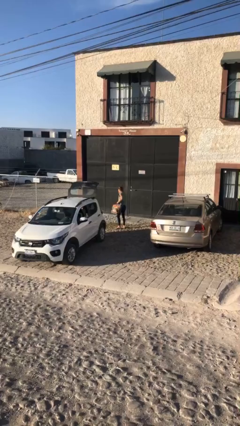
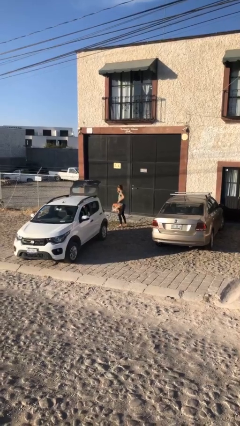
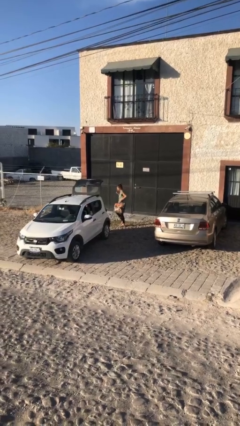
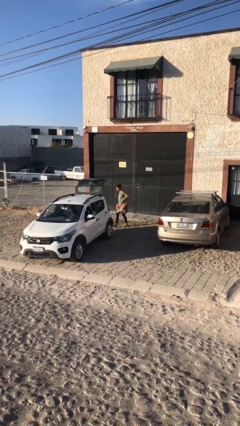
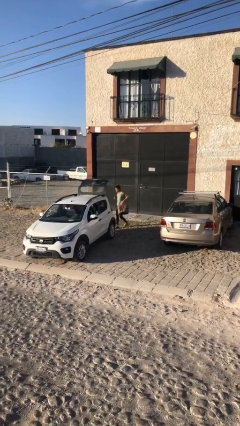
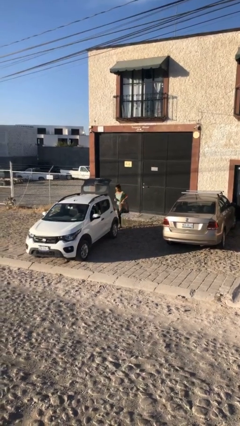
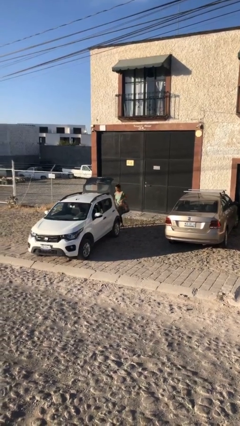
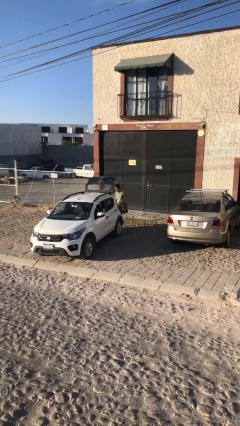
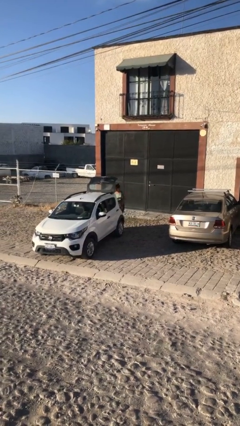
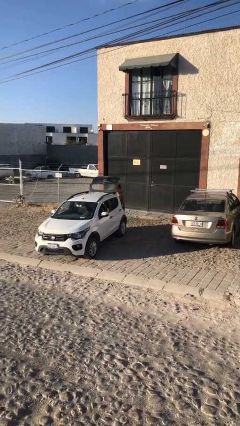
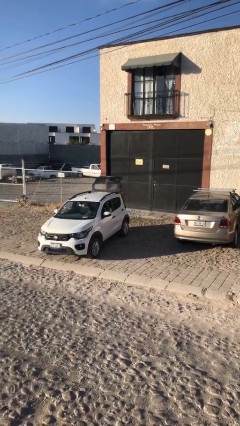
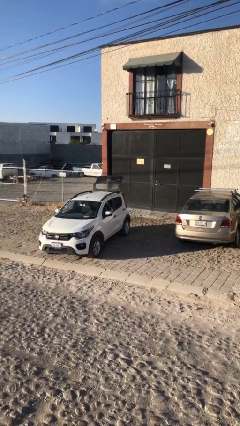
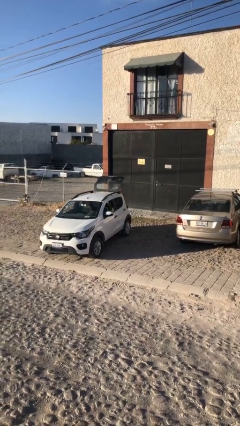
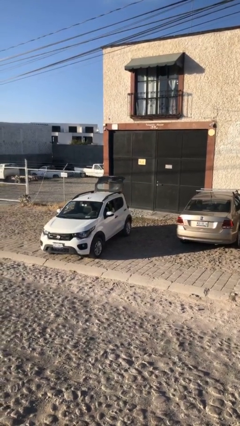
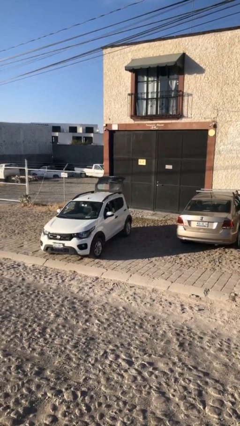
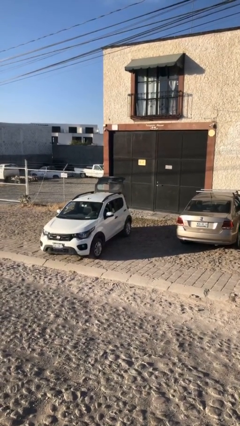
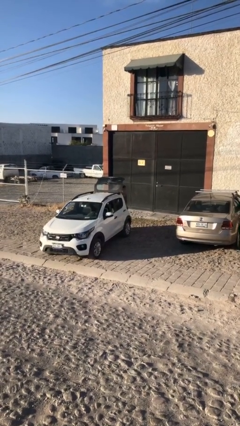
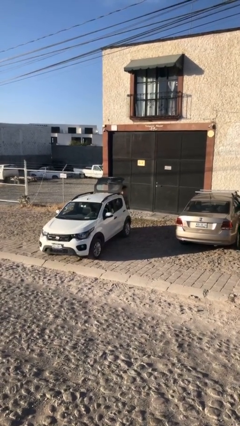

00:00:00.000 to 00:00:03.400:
person loads car

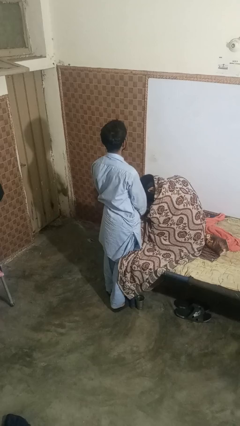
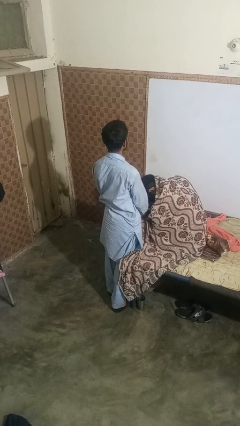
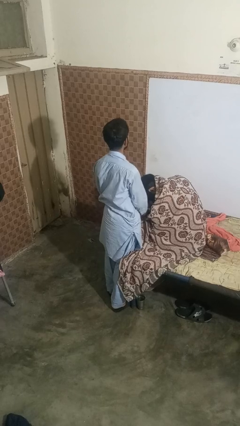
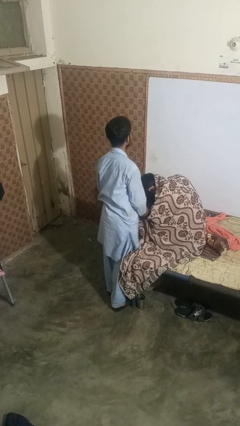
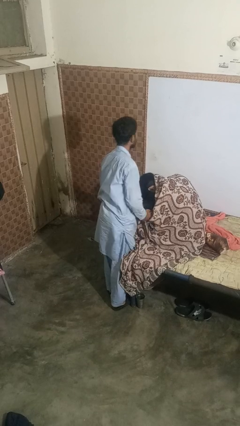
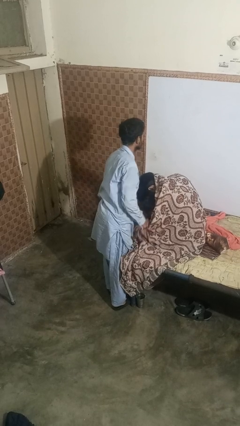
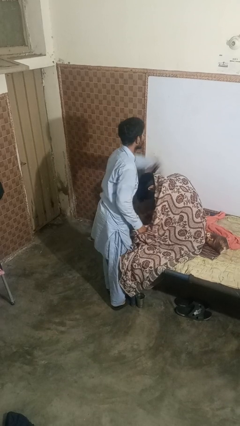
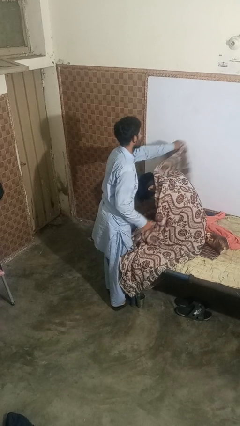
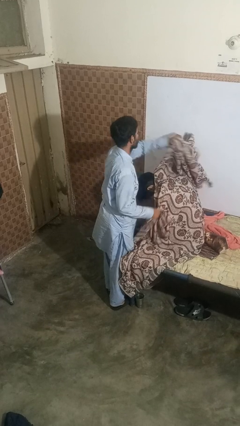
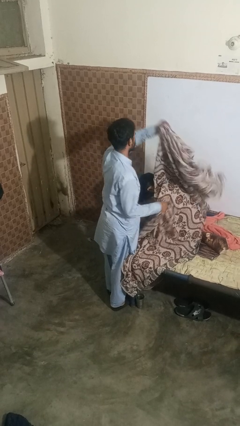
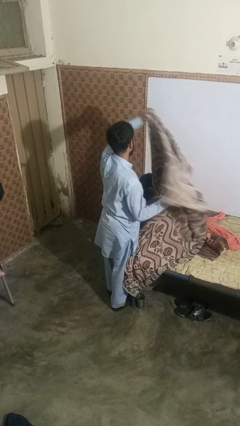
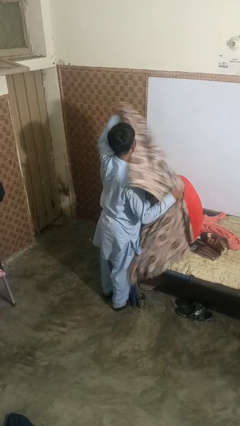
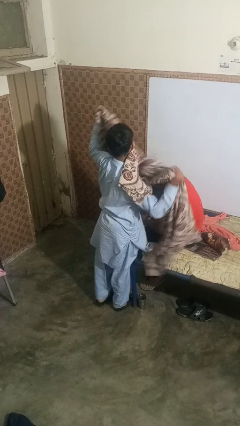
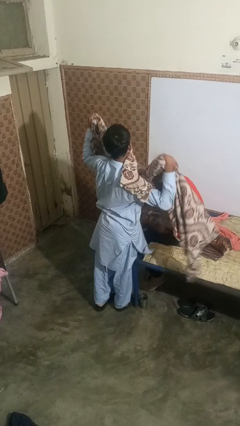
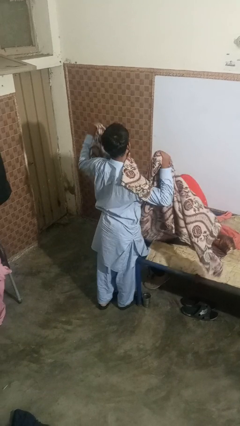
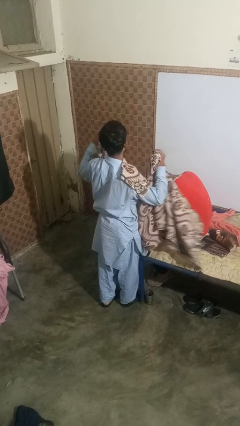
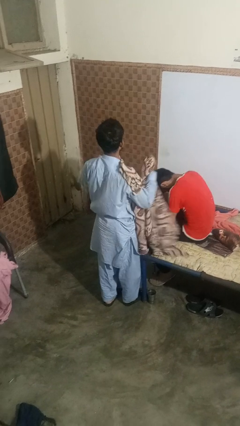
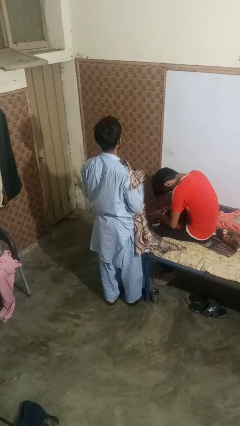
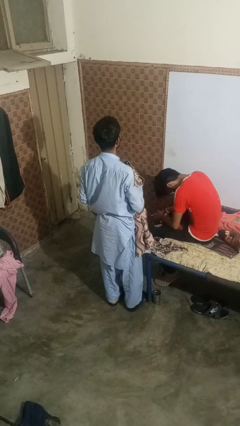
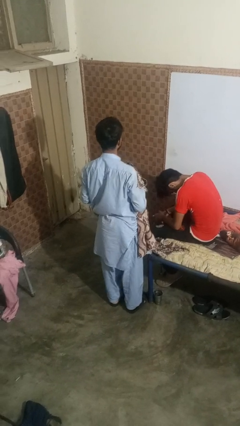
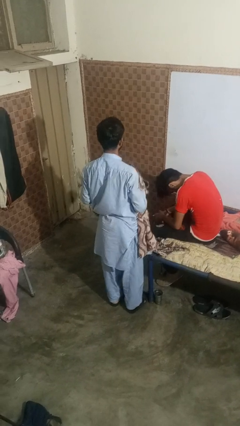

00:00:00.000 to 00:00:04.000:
person uncovers friend with blanket

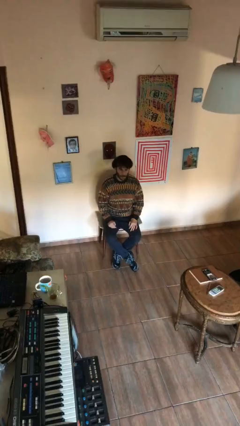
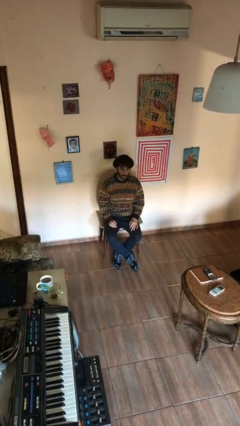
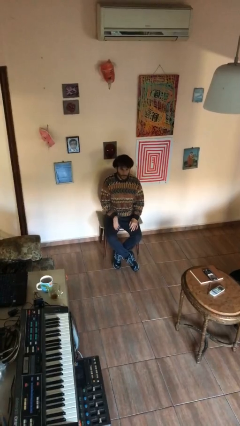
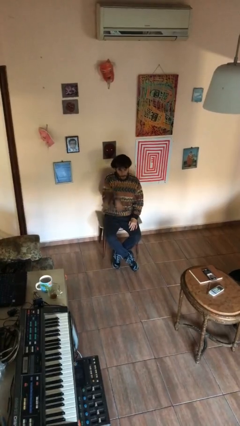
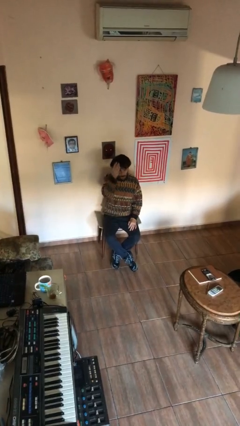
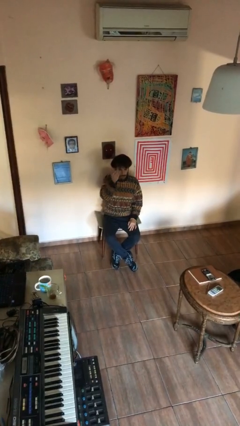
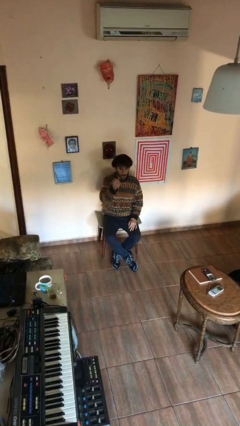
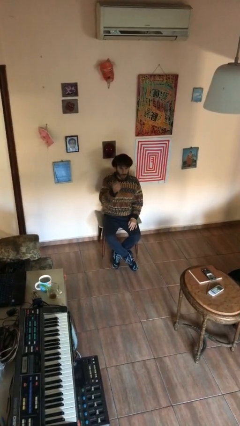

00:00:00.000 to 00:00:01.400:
person gestures swipe up

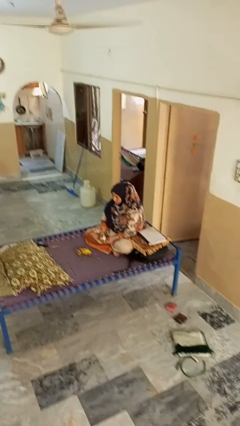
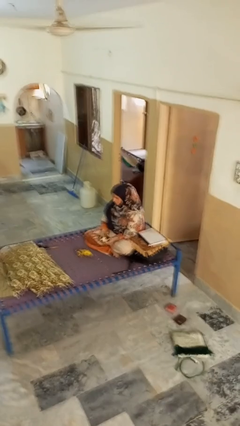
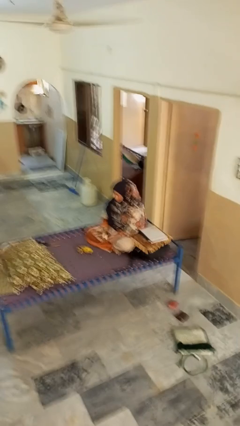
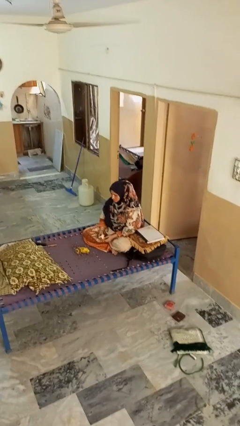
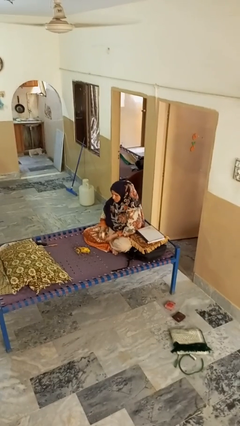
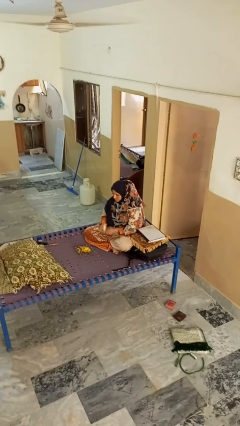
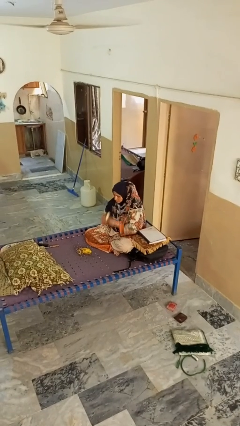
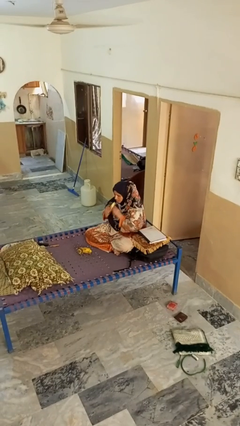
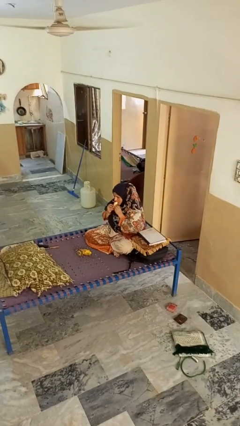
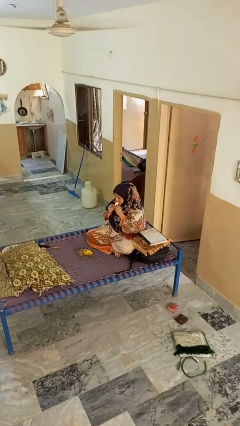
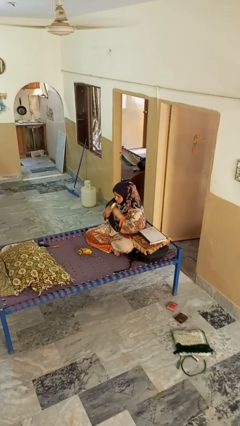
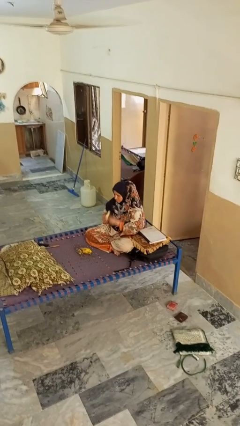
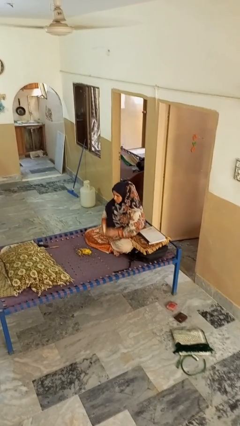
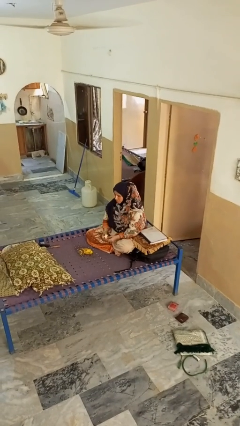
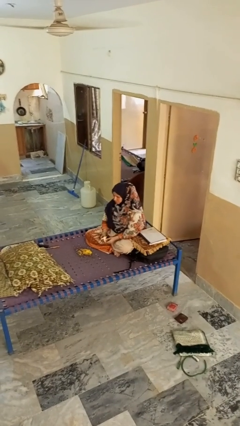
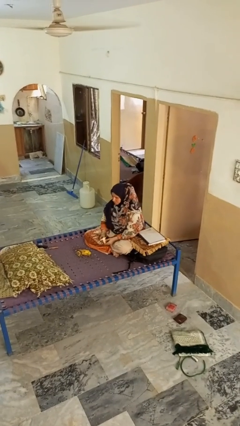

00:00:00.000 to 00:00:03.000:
person eats banana

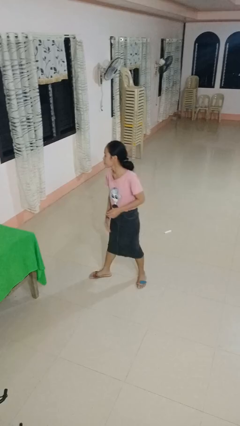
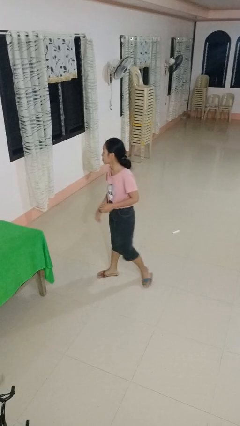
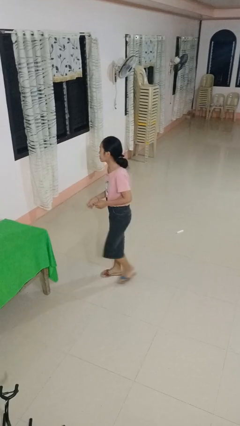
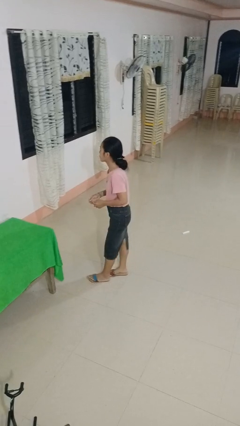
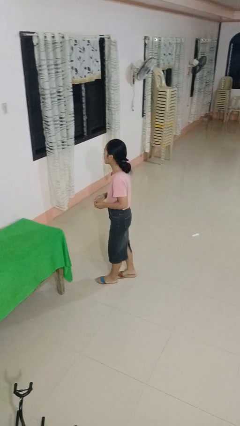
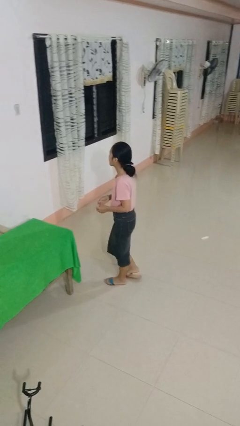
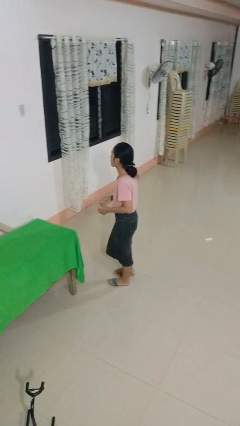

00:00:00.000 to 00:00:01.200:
person slaps hands on thighs

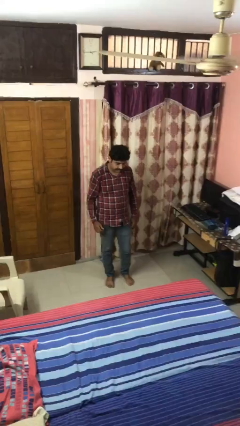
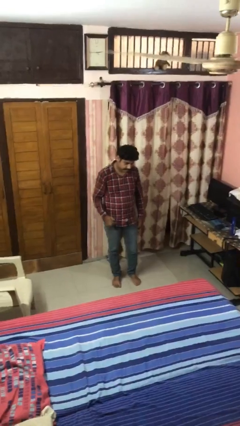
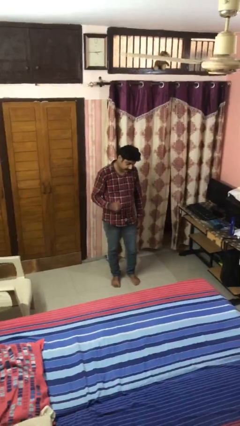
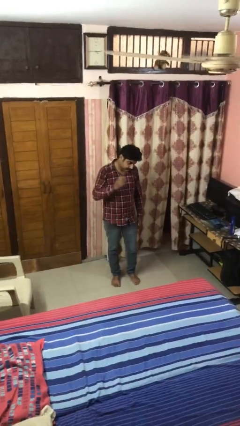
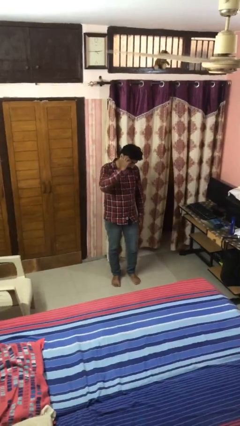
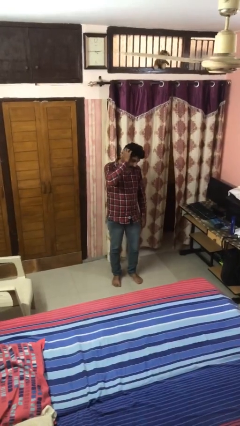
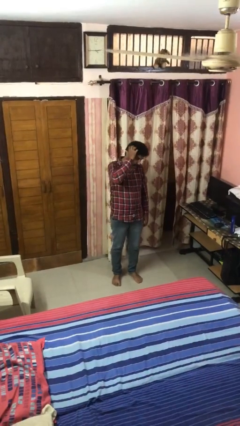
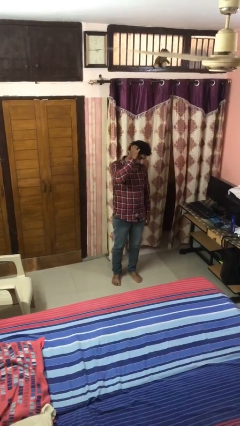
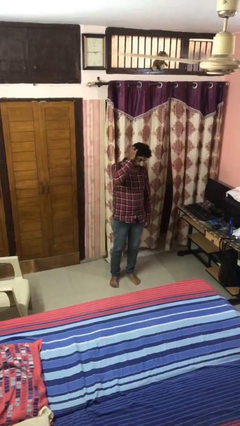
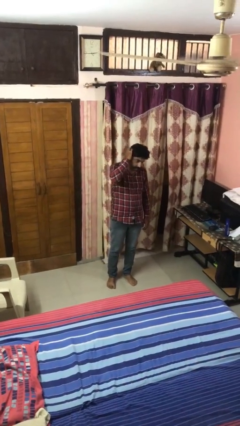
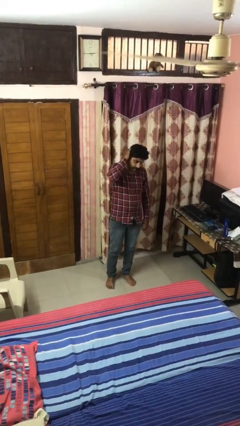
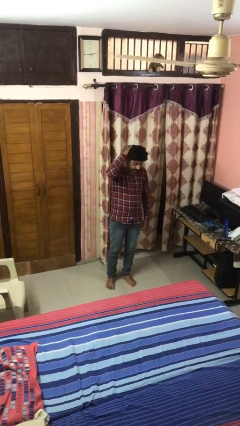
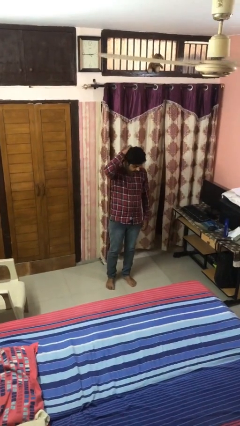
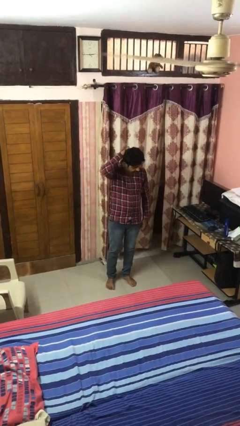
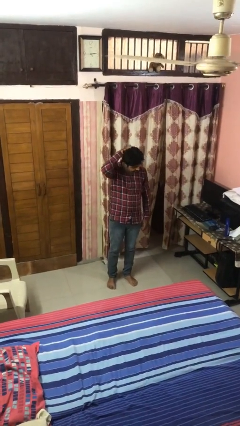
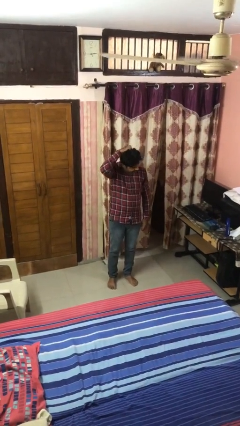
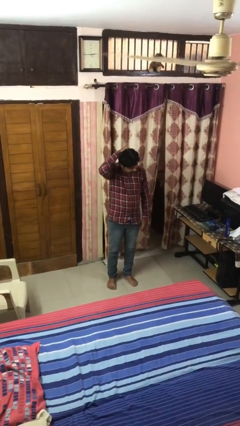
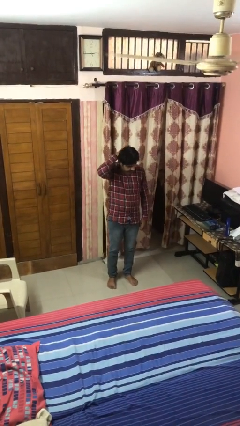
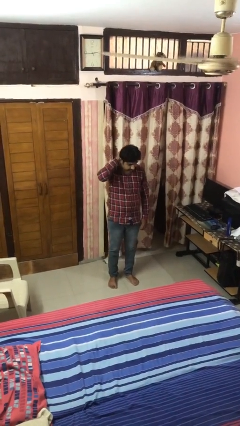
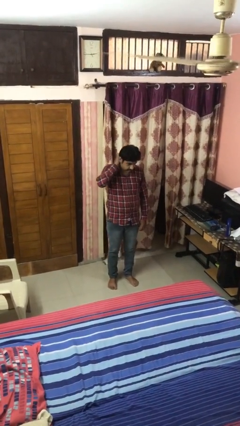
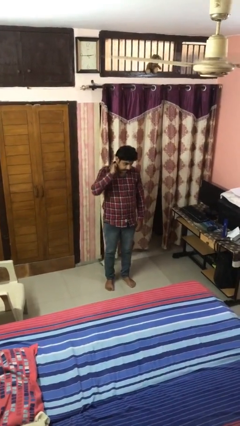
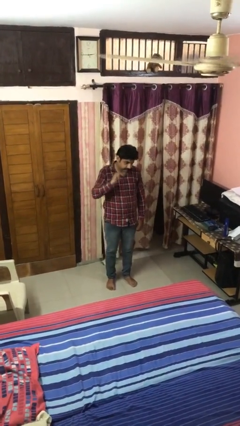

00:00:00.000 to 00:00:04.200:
person scratches face
